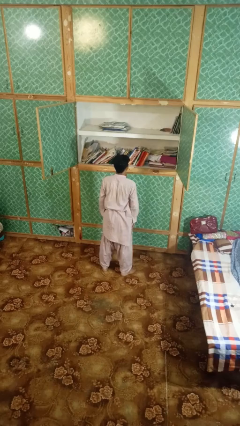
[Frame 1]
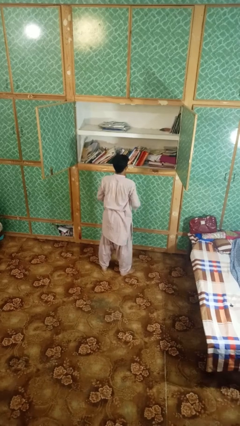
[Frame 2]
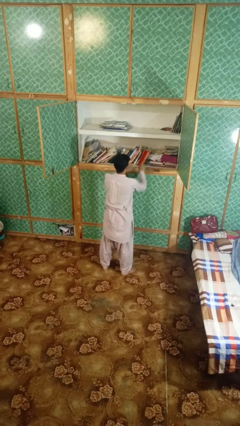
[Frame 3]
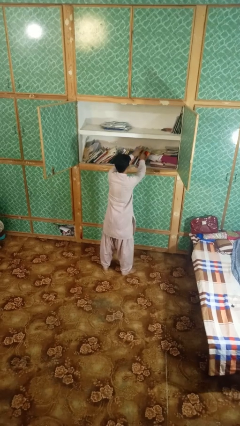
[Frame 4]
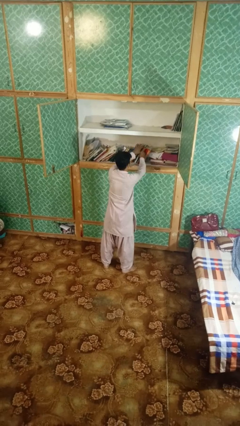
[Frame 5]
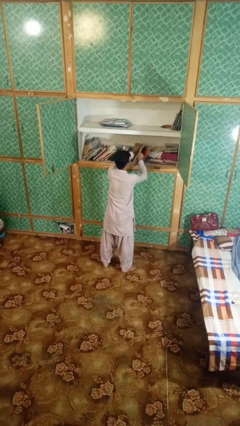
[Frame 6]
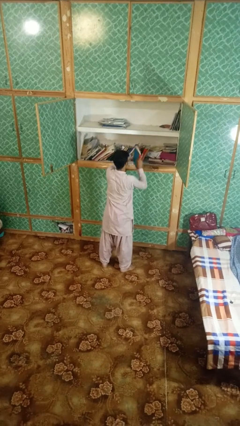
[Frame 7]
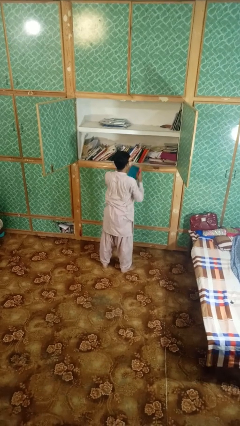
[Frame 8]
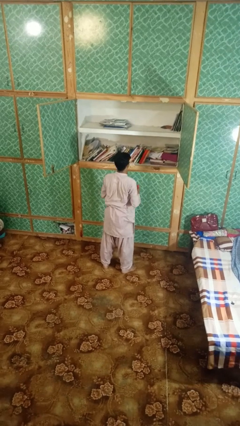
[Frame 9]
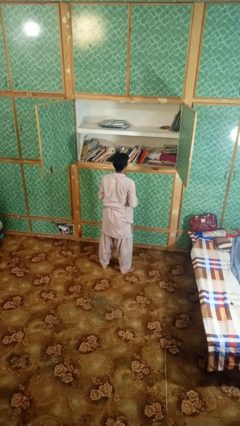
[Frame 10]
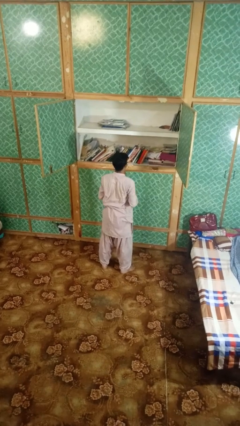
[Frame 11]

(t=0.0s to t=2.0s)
person picks up object from shelf

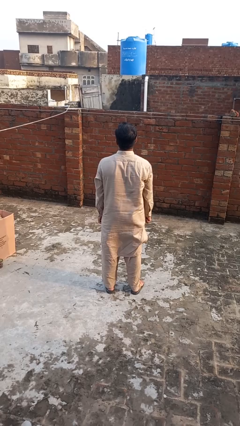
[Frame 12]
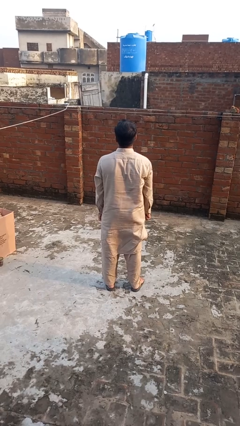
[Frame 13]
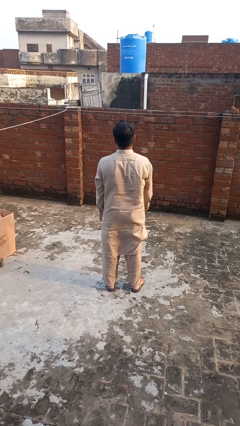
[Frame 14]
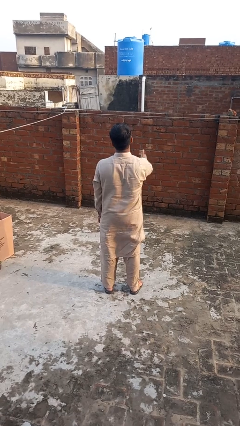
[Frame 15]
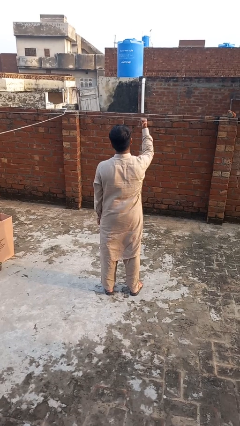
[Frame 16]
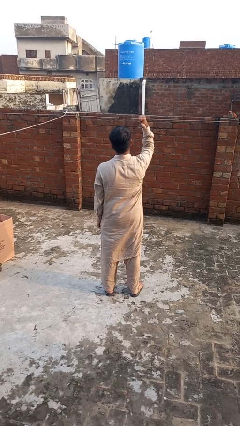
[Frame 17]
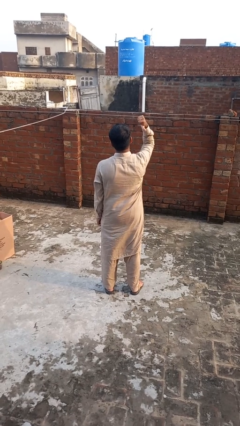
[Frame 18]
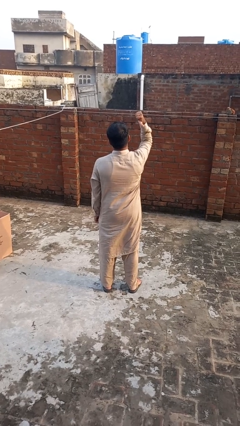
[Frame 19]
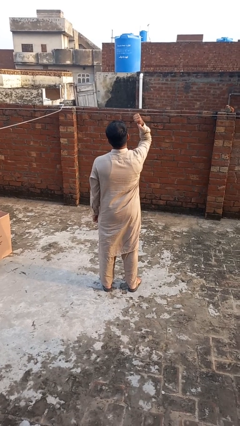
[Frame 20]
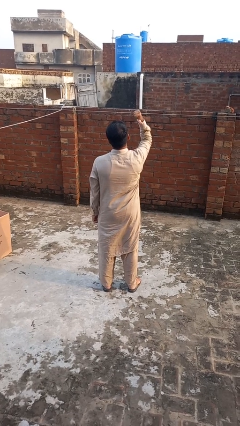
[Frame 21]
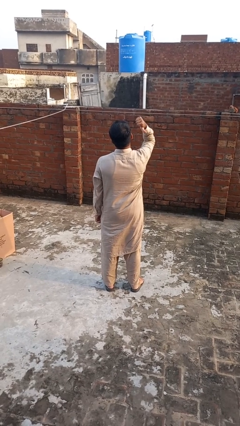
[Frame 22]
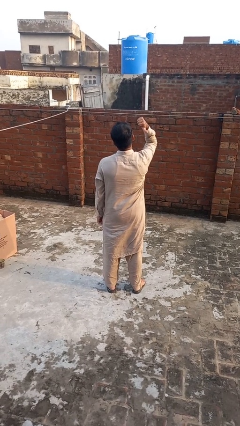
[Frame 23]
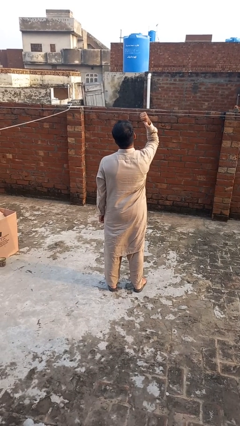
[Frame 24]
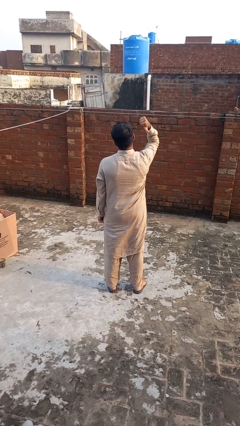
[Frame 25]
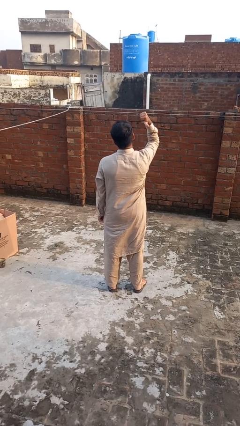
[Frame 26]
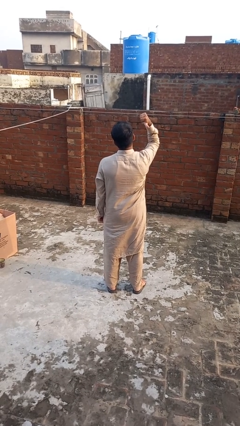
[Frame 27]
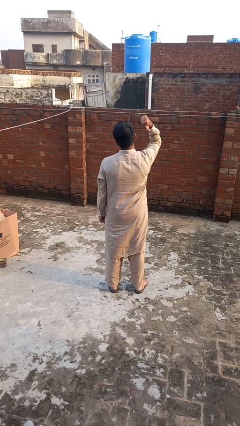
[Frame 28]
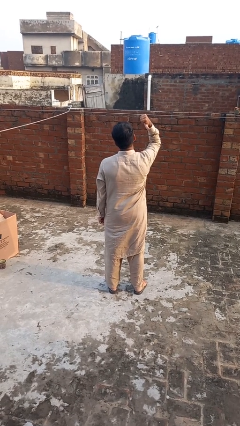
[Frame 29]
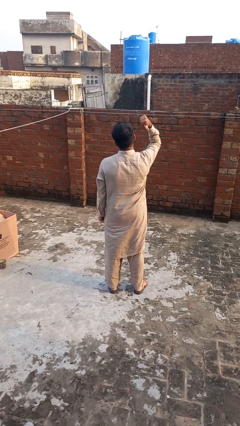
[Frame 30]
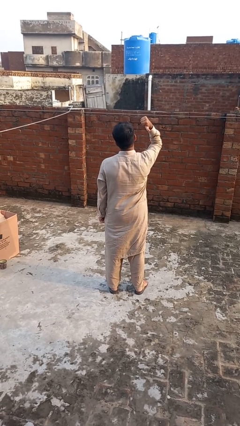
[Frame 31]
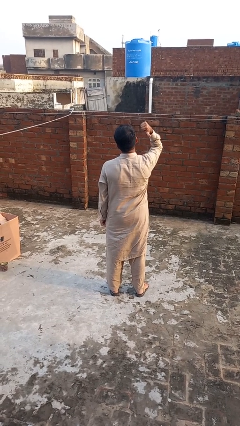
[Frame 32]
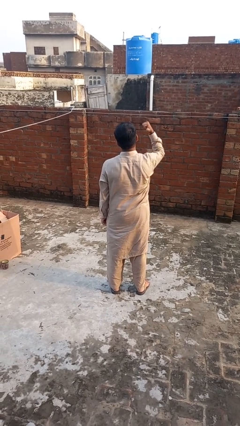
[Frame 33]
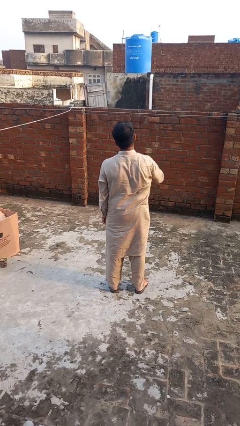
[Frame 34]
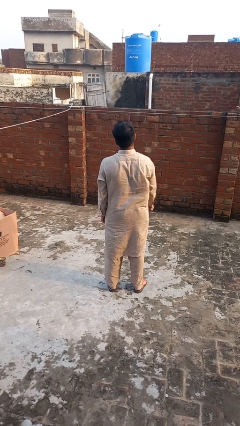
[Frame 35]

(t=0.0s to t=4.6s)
person gestures behind me

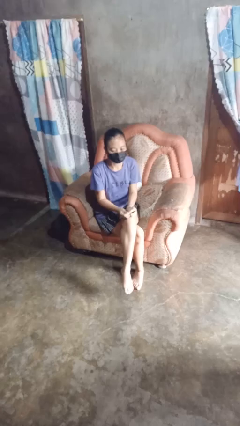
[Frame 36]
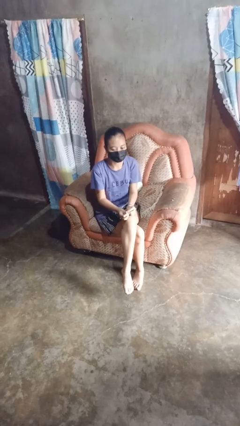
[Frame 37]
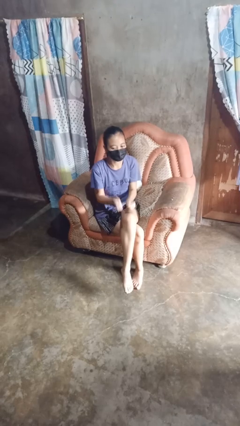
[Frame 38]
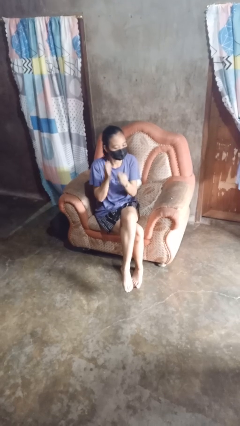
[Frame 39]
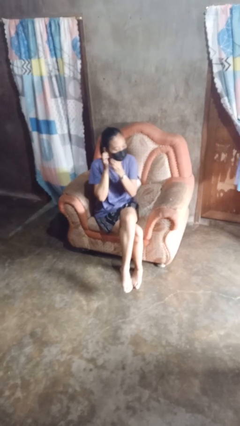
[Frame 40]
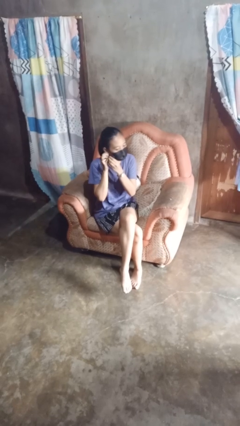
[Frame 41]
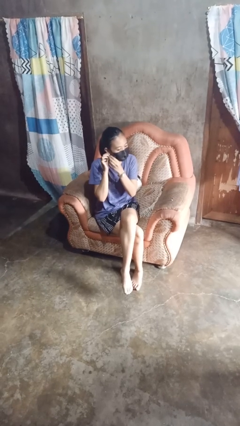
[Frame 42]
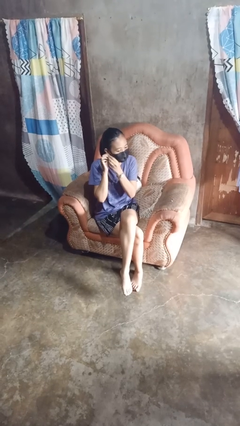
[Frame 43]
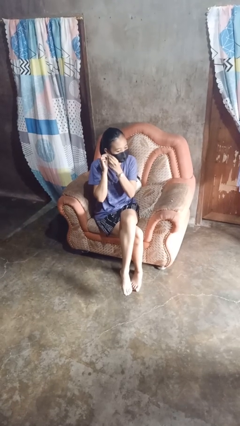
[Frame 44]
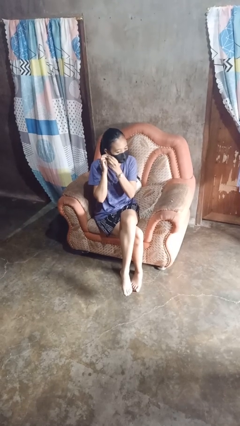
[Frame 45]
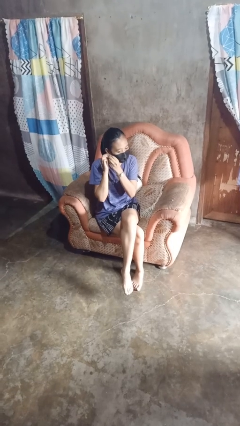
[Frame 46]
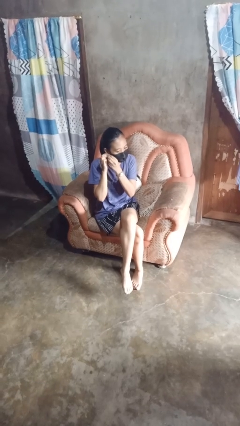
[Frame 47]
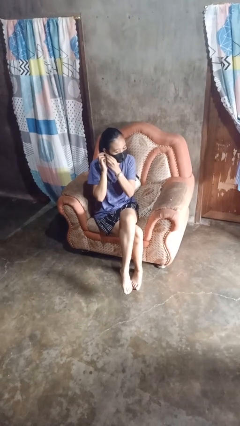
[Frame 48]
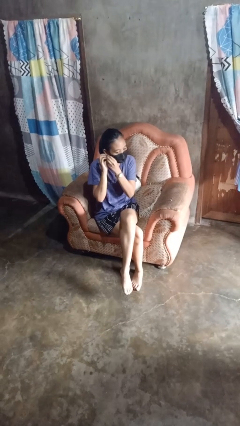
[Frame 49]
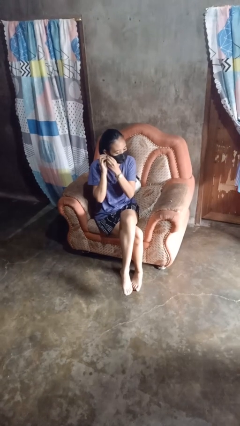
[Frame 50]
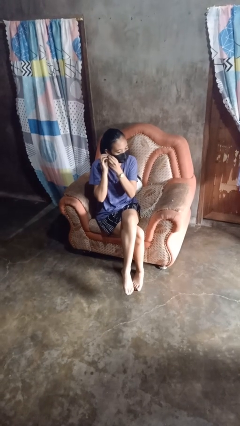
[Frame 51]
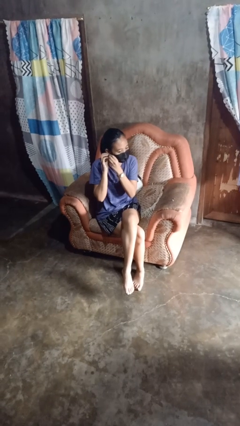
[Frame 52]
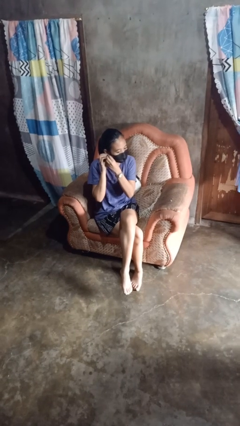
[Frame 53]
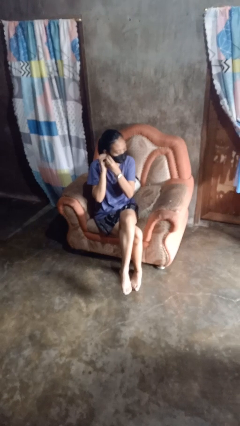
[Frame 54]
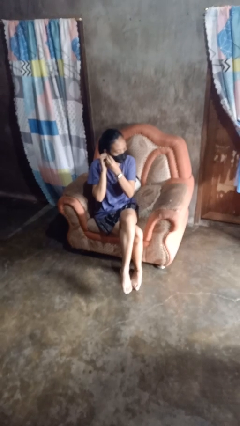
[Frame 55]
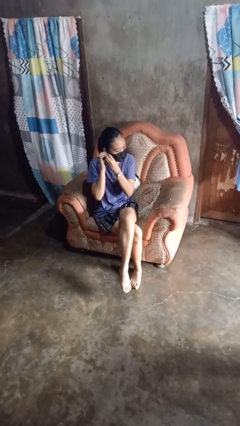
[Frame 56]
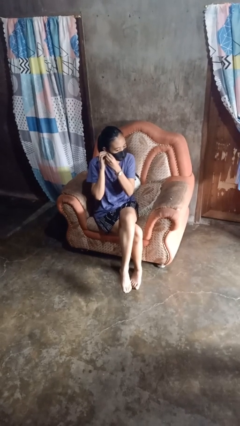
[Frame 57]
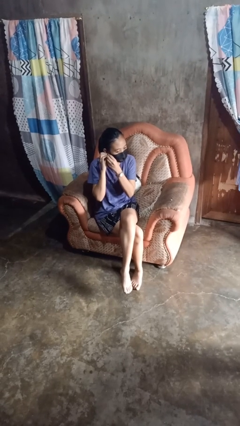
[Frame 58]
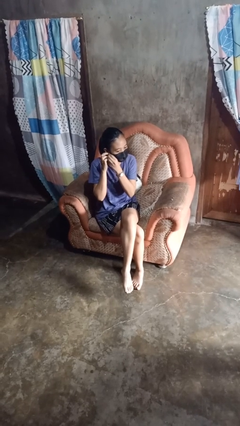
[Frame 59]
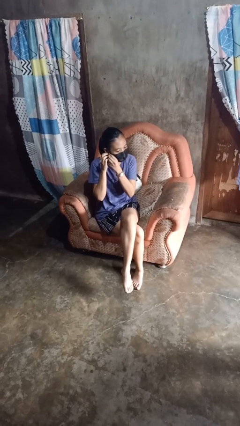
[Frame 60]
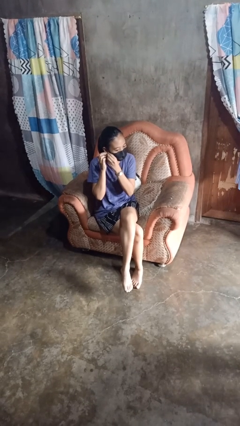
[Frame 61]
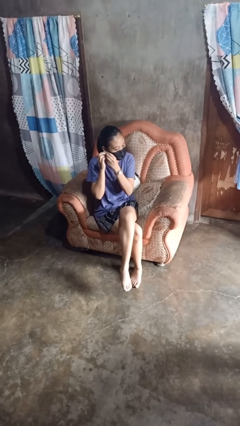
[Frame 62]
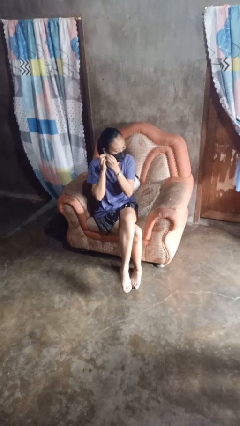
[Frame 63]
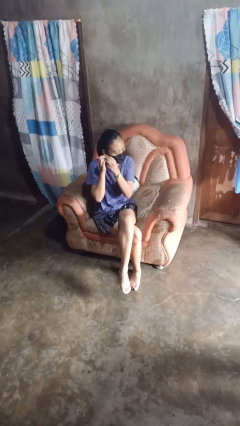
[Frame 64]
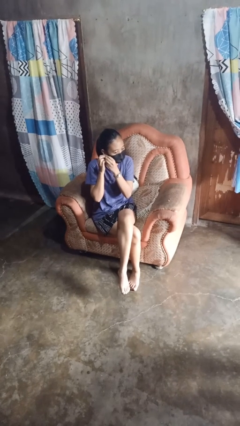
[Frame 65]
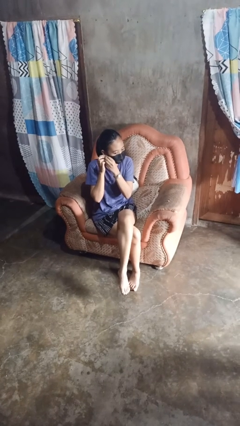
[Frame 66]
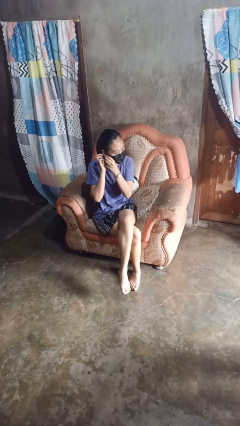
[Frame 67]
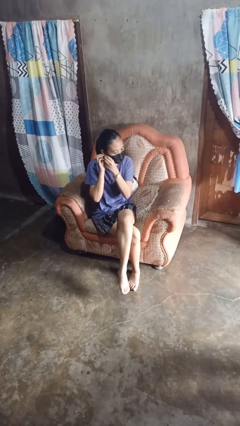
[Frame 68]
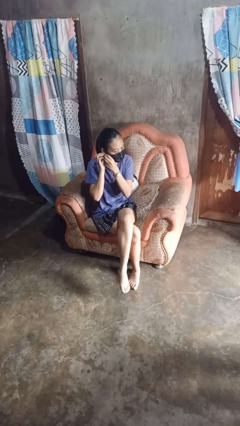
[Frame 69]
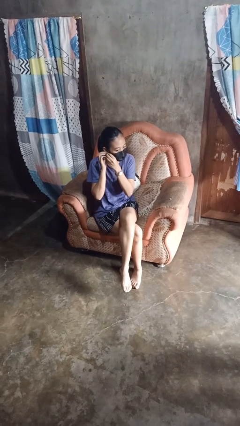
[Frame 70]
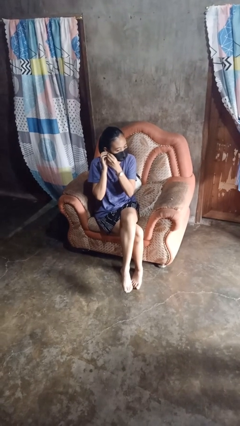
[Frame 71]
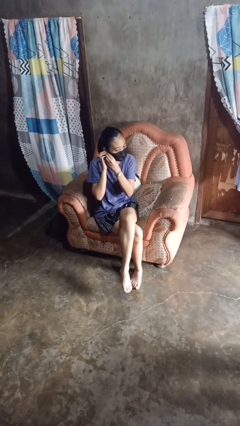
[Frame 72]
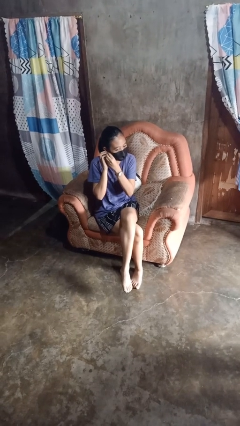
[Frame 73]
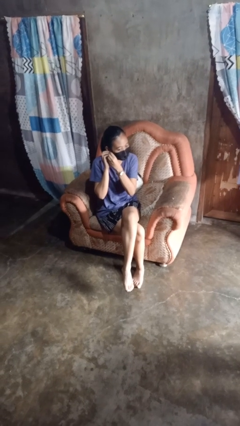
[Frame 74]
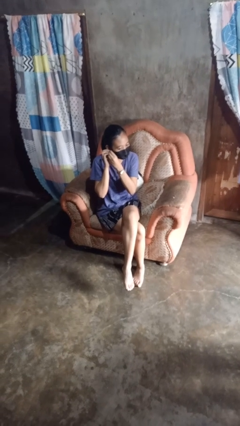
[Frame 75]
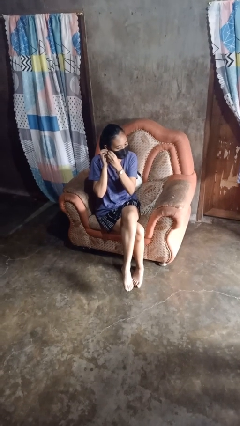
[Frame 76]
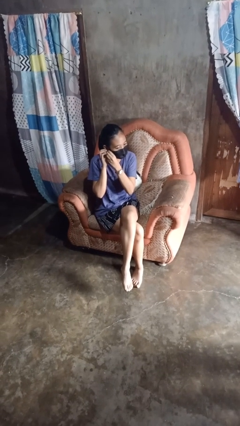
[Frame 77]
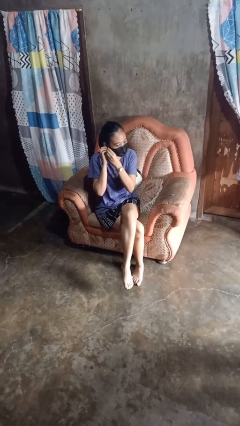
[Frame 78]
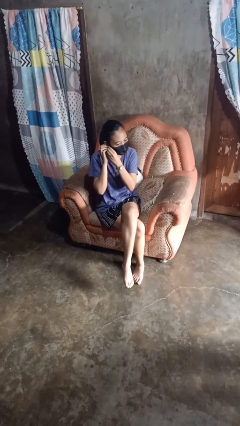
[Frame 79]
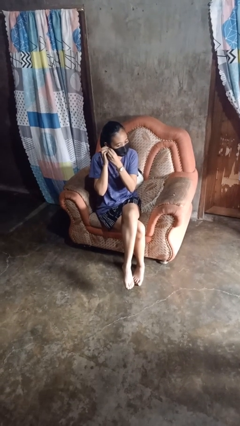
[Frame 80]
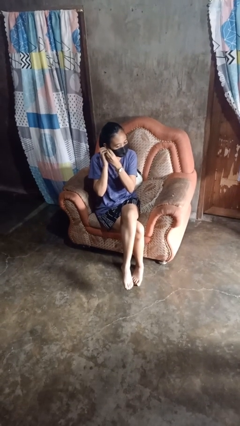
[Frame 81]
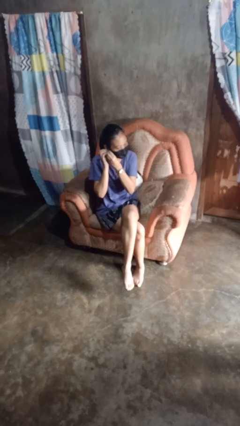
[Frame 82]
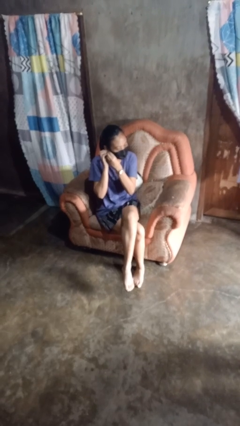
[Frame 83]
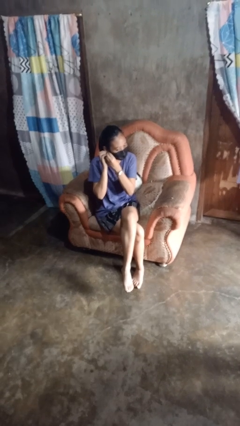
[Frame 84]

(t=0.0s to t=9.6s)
person puts on earrings

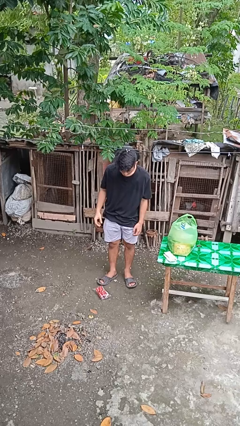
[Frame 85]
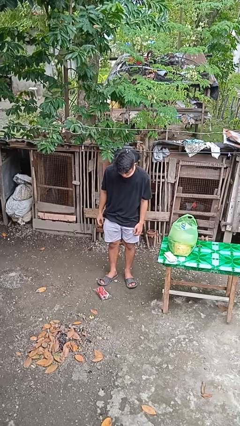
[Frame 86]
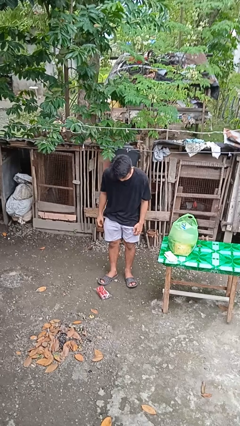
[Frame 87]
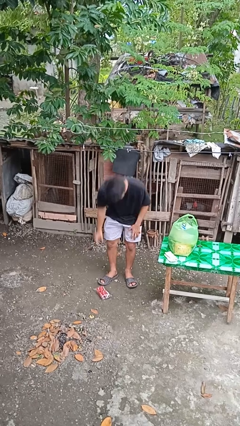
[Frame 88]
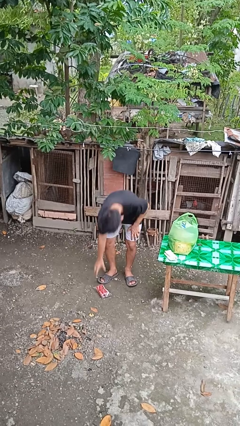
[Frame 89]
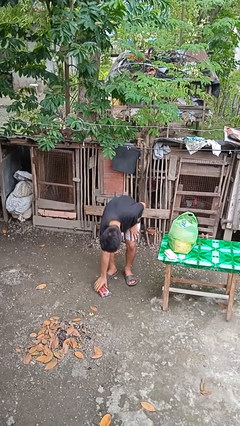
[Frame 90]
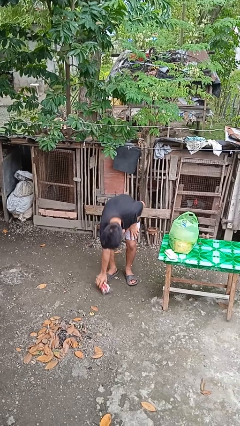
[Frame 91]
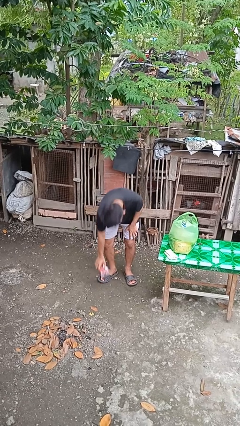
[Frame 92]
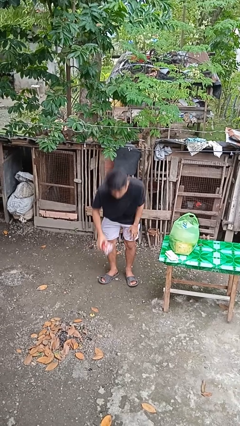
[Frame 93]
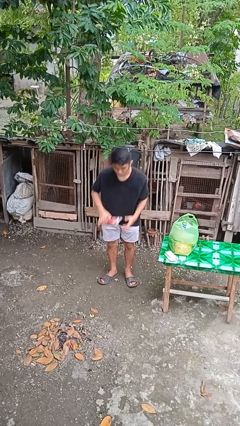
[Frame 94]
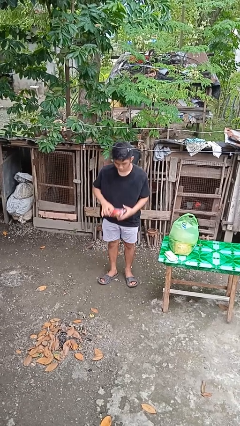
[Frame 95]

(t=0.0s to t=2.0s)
person picks up object from floor
